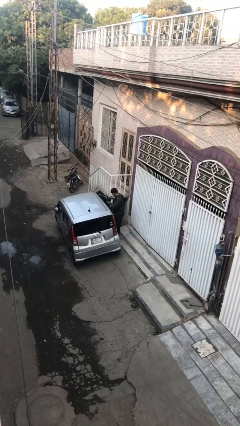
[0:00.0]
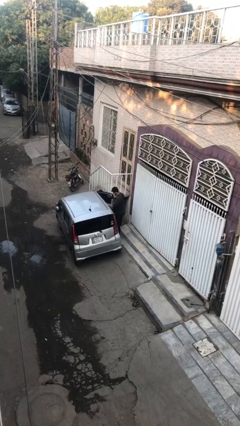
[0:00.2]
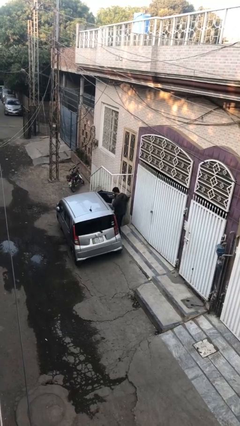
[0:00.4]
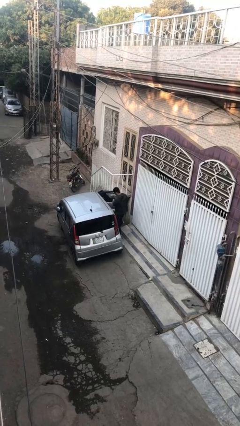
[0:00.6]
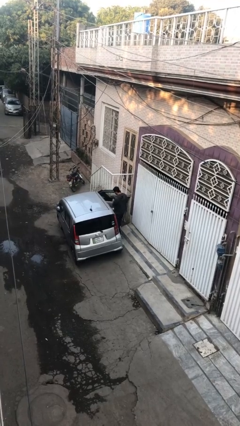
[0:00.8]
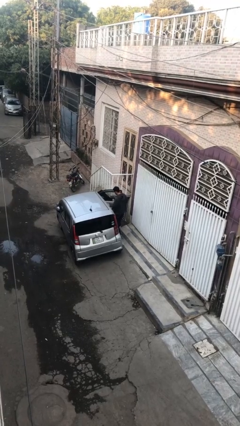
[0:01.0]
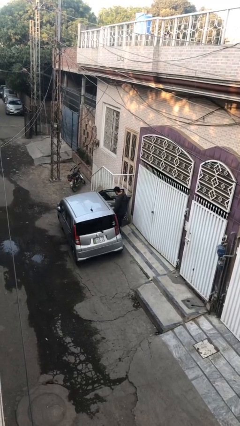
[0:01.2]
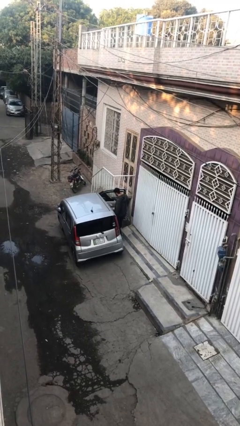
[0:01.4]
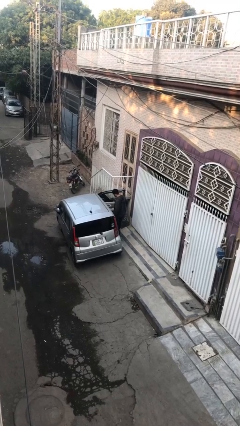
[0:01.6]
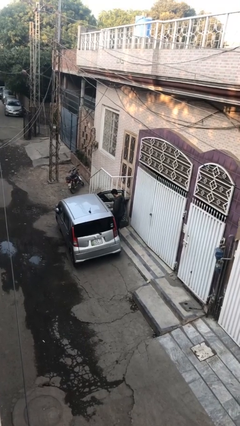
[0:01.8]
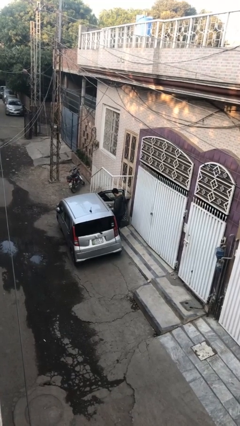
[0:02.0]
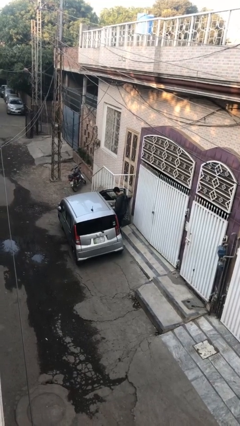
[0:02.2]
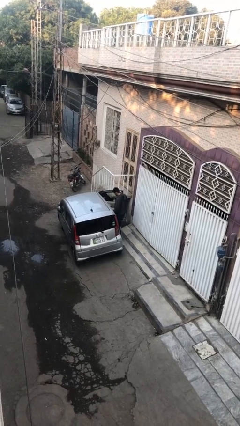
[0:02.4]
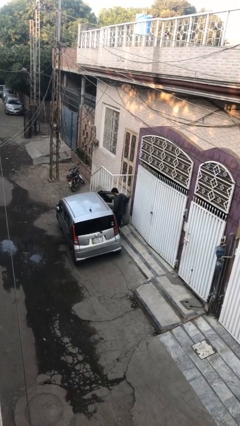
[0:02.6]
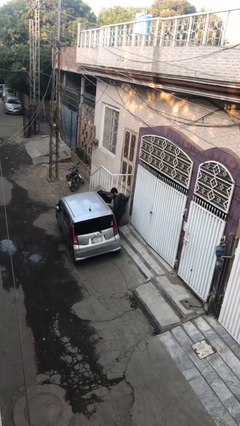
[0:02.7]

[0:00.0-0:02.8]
person opens car door

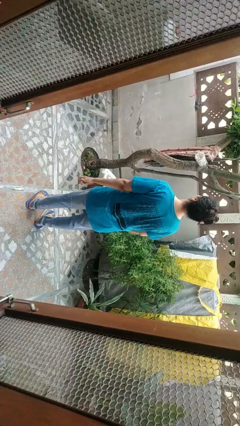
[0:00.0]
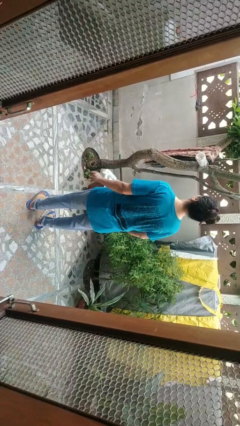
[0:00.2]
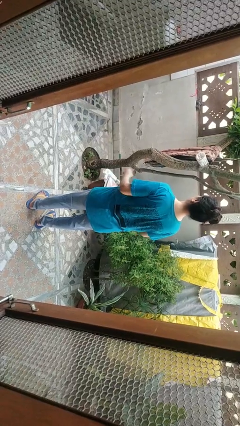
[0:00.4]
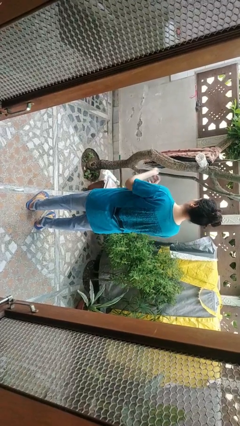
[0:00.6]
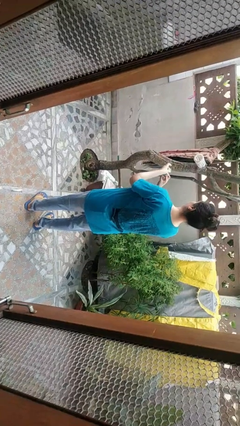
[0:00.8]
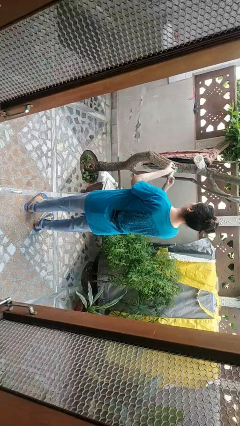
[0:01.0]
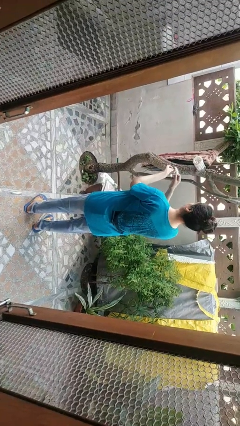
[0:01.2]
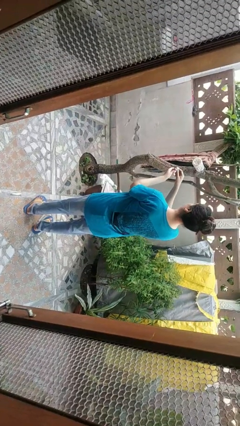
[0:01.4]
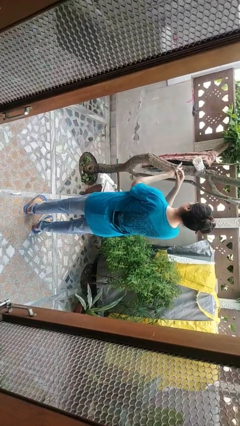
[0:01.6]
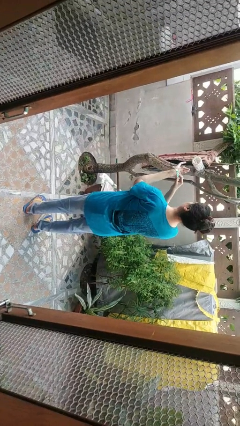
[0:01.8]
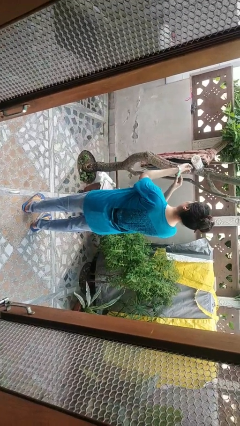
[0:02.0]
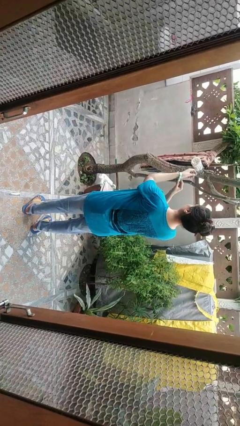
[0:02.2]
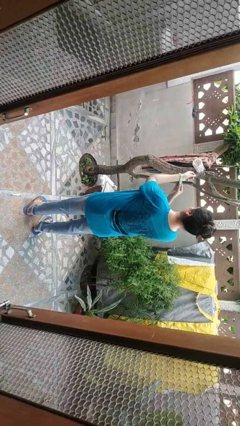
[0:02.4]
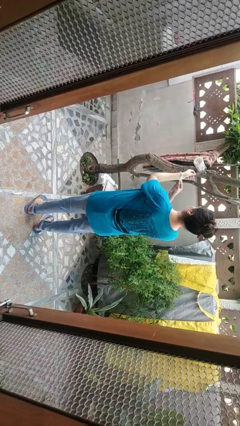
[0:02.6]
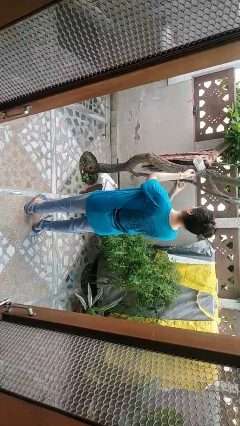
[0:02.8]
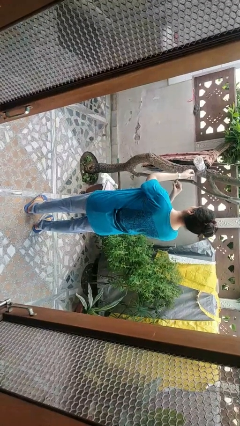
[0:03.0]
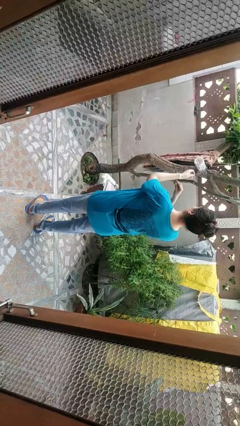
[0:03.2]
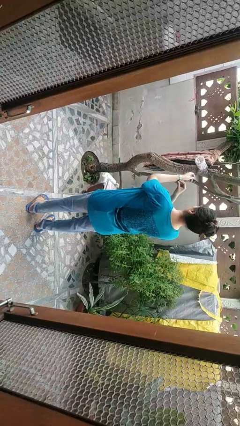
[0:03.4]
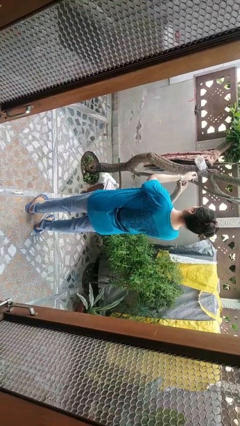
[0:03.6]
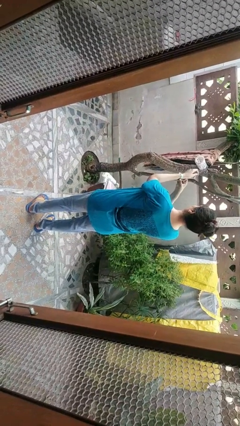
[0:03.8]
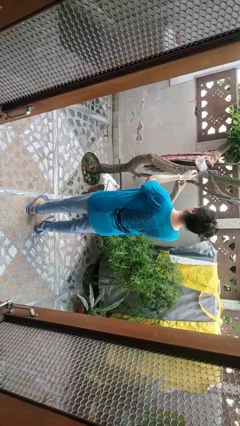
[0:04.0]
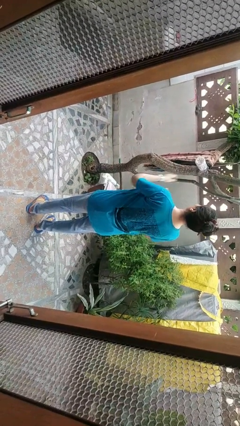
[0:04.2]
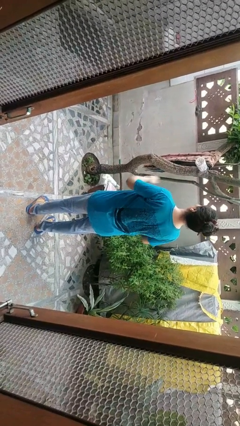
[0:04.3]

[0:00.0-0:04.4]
person puts on wristwatch

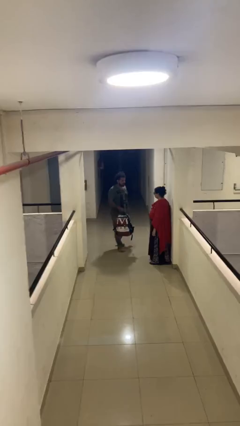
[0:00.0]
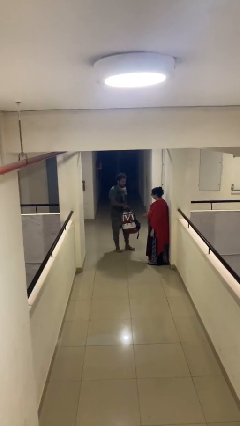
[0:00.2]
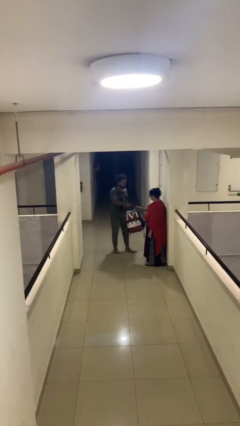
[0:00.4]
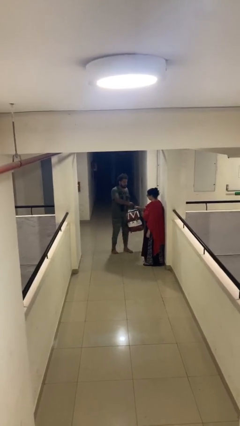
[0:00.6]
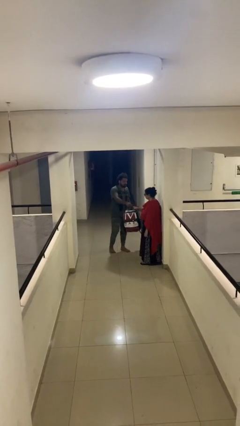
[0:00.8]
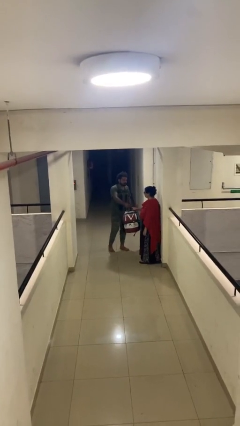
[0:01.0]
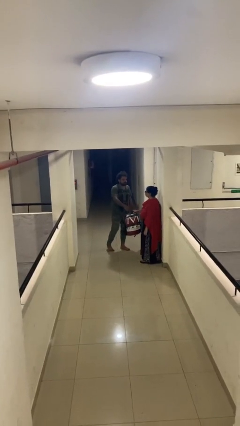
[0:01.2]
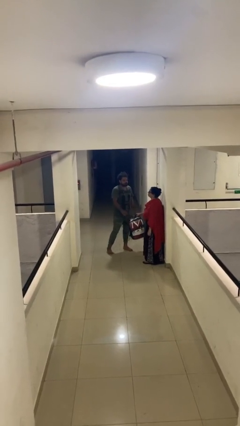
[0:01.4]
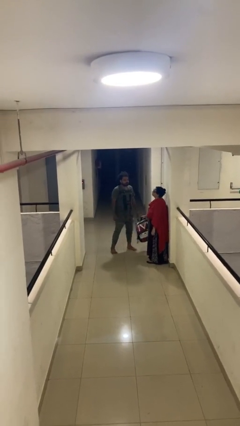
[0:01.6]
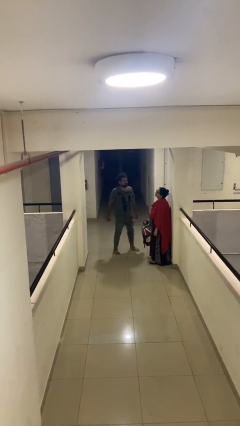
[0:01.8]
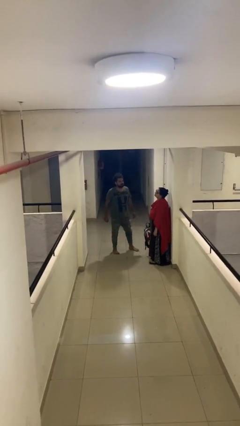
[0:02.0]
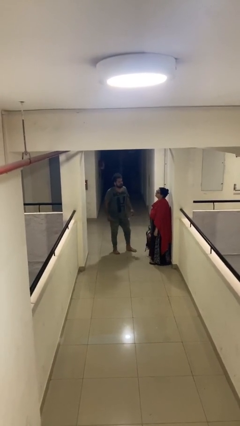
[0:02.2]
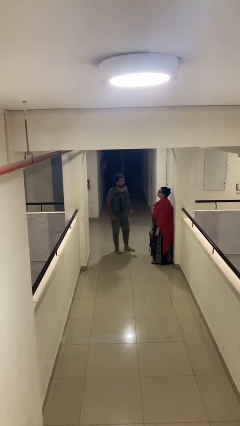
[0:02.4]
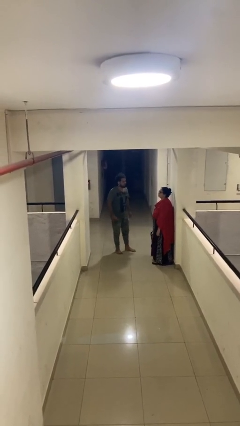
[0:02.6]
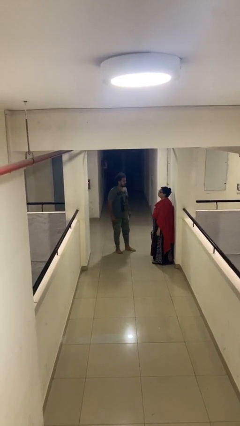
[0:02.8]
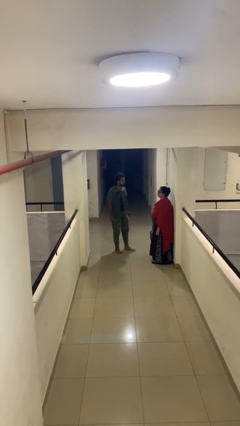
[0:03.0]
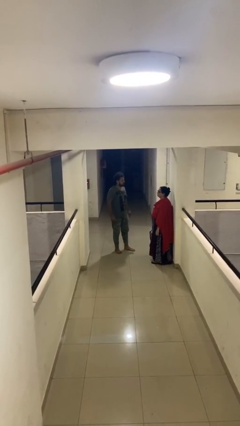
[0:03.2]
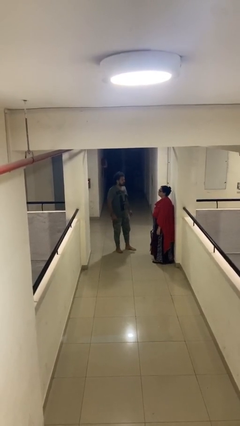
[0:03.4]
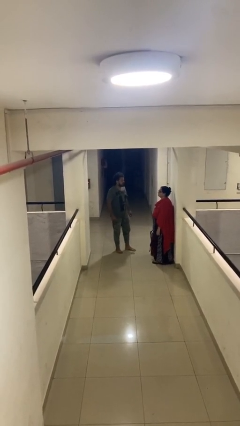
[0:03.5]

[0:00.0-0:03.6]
person transfers object to person

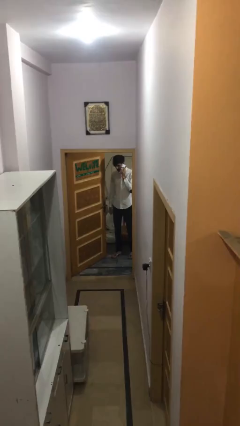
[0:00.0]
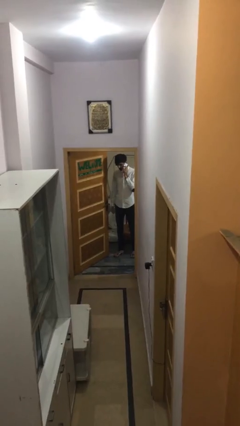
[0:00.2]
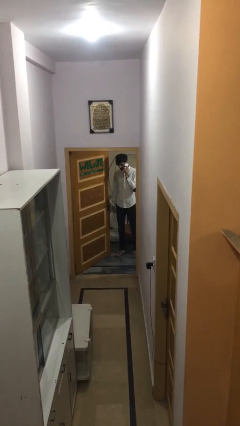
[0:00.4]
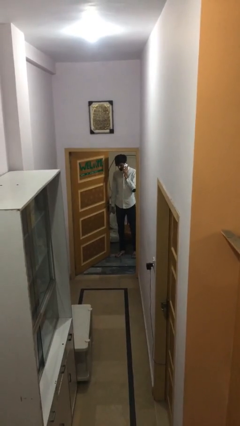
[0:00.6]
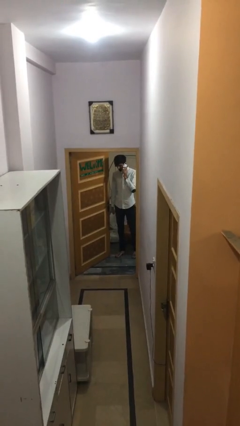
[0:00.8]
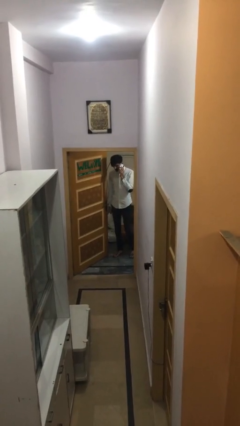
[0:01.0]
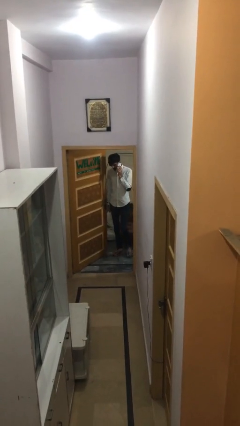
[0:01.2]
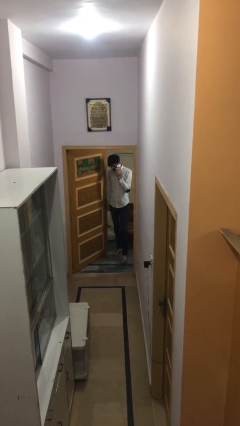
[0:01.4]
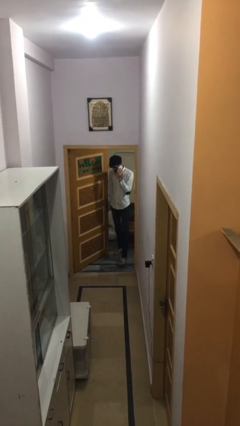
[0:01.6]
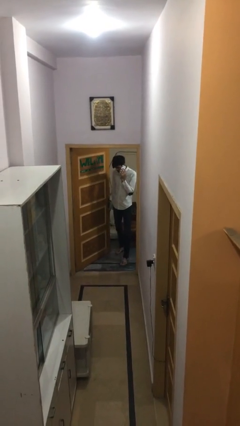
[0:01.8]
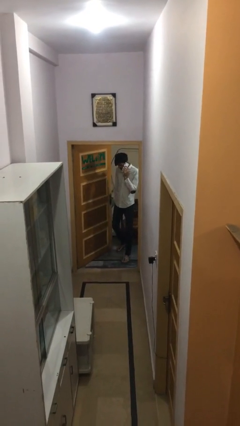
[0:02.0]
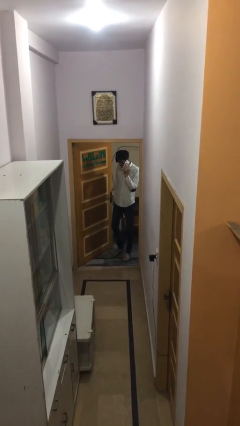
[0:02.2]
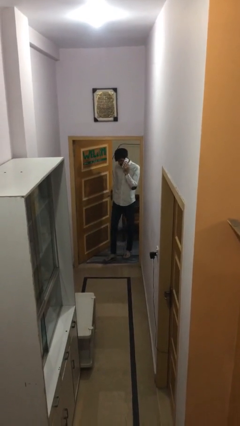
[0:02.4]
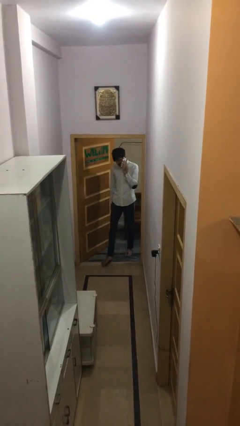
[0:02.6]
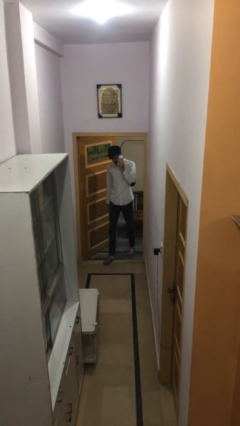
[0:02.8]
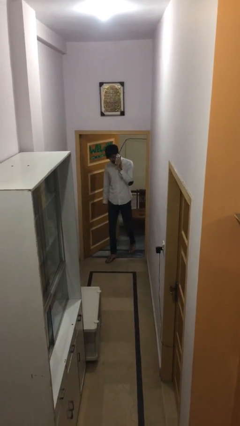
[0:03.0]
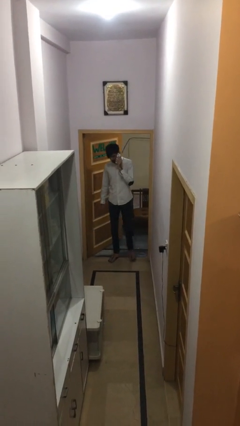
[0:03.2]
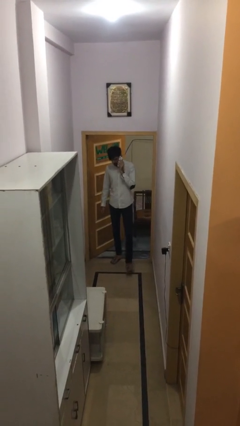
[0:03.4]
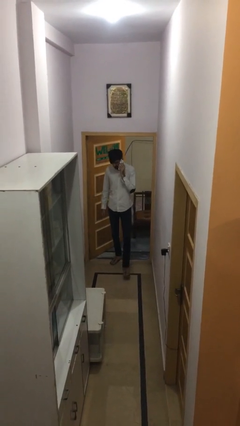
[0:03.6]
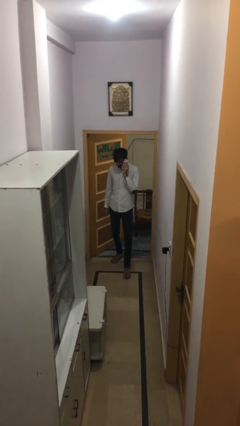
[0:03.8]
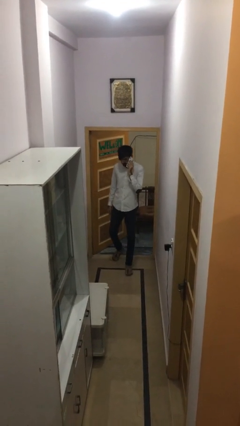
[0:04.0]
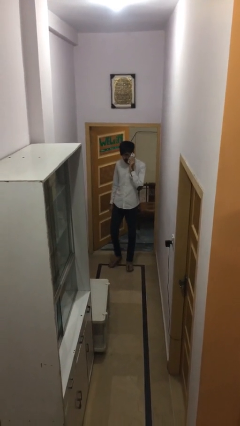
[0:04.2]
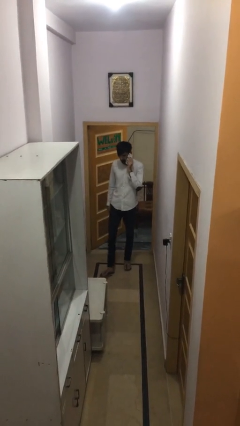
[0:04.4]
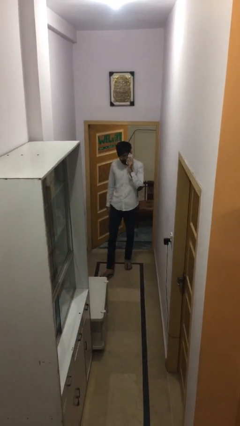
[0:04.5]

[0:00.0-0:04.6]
person enters scene through structure

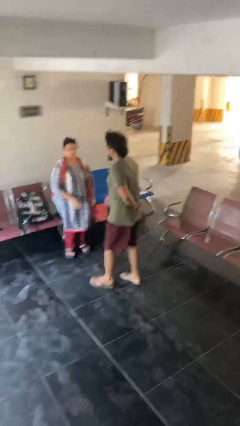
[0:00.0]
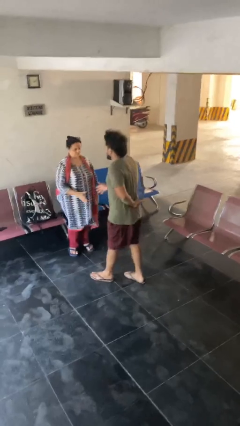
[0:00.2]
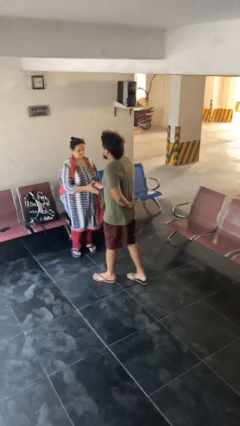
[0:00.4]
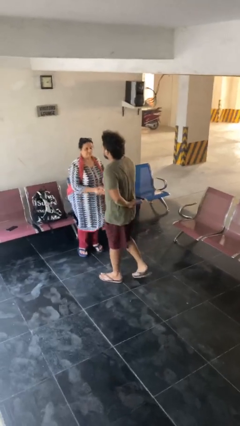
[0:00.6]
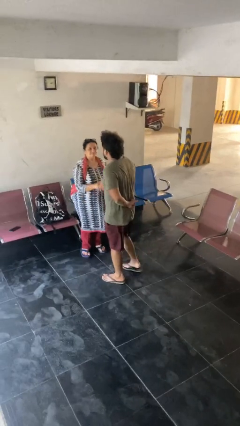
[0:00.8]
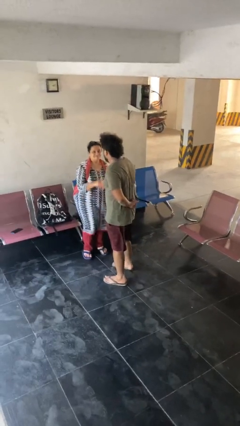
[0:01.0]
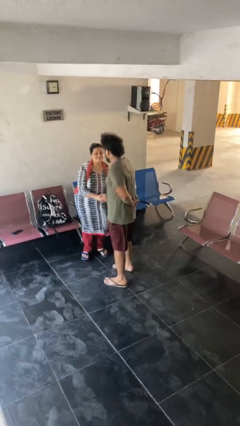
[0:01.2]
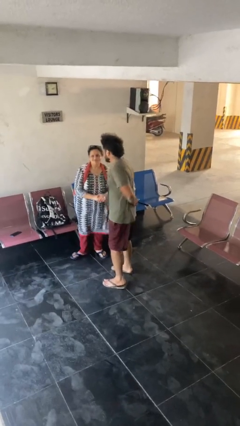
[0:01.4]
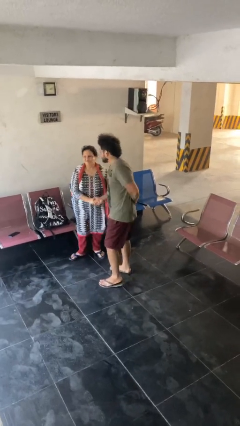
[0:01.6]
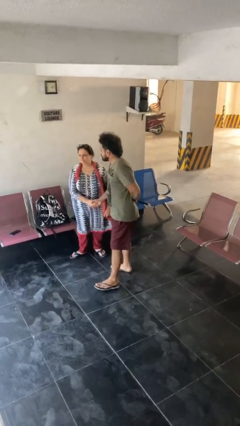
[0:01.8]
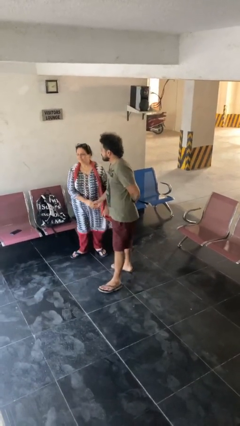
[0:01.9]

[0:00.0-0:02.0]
person shakes hand

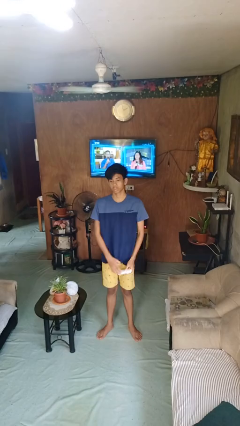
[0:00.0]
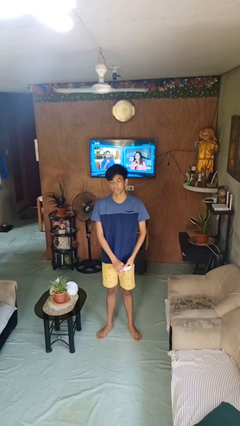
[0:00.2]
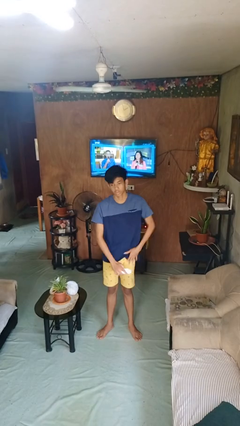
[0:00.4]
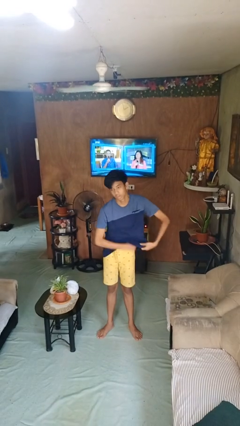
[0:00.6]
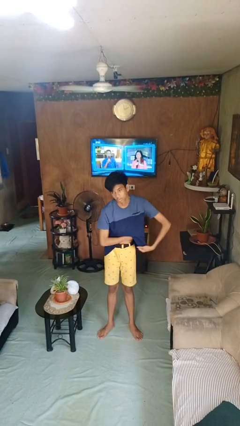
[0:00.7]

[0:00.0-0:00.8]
person applies deodorant
